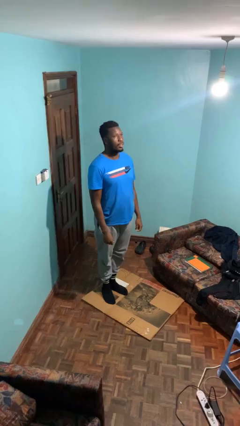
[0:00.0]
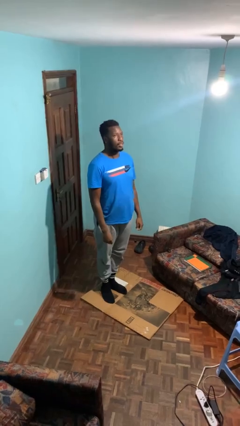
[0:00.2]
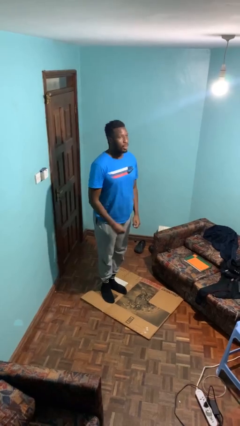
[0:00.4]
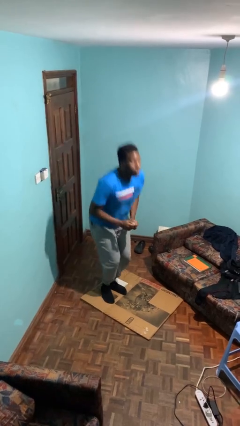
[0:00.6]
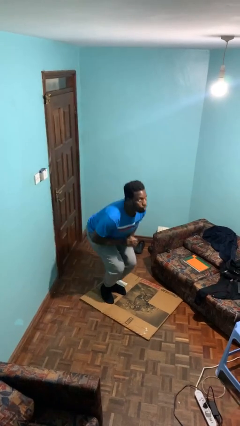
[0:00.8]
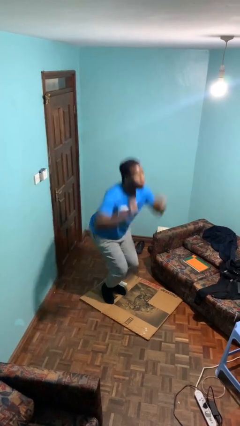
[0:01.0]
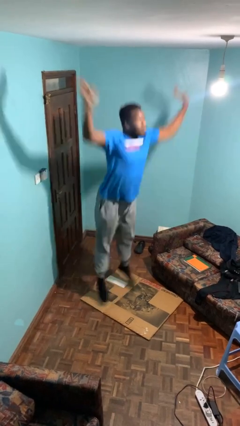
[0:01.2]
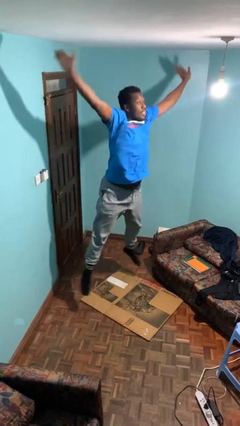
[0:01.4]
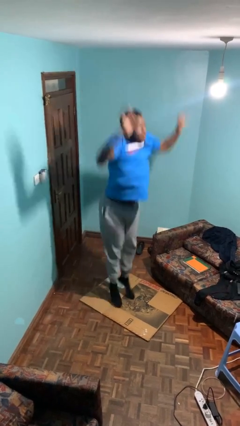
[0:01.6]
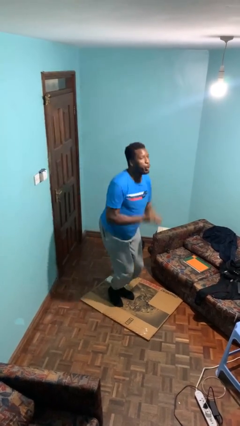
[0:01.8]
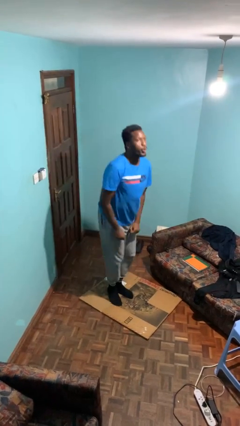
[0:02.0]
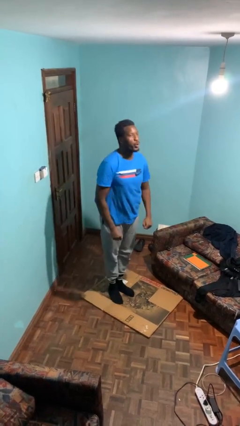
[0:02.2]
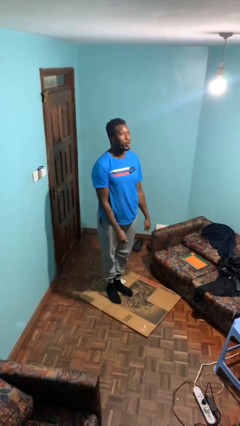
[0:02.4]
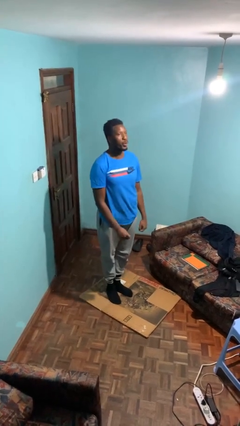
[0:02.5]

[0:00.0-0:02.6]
person exercises with jumping jacks

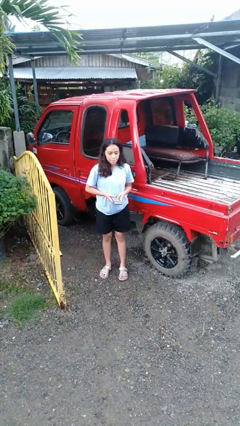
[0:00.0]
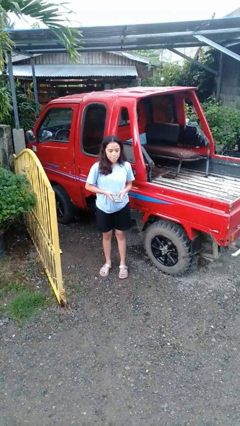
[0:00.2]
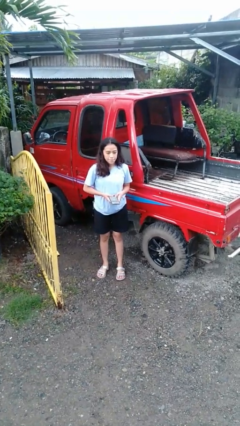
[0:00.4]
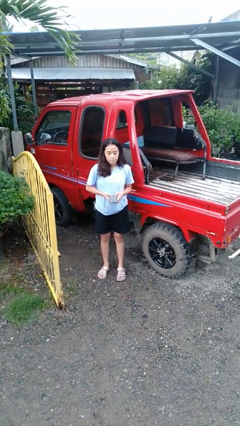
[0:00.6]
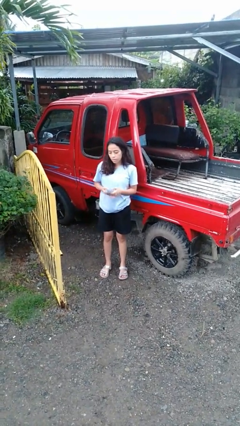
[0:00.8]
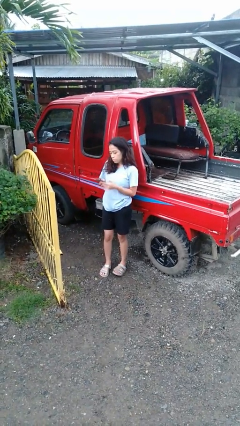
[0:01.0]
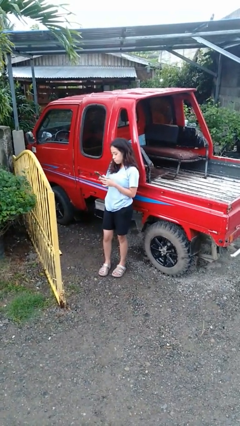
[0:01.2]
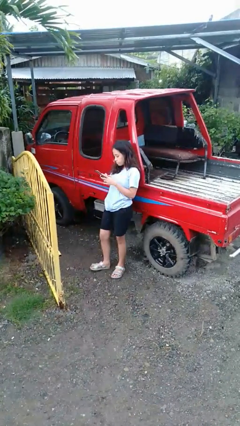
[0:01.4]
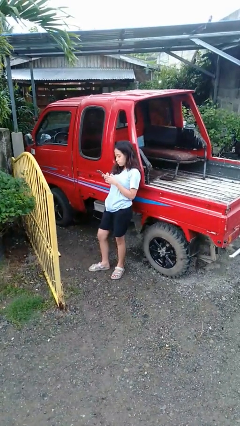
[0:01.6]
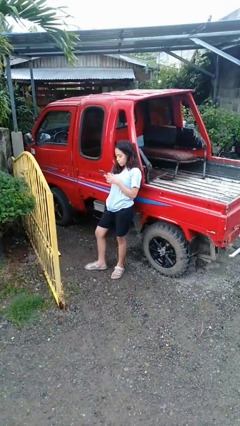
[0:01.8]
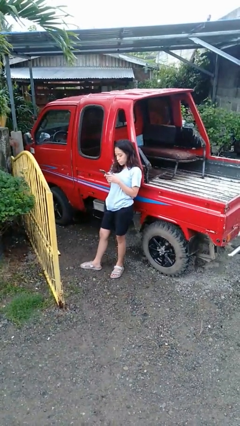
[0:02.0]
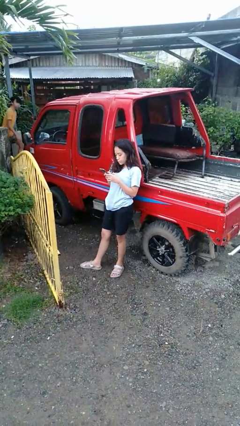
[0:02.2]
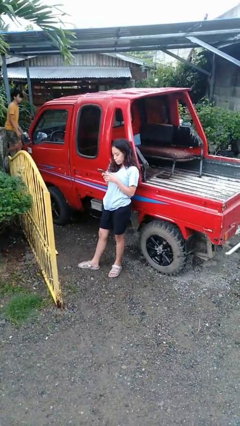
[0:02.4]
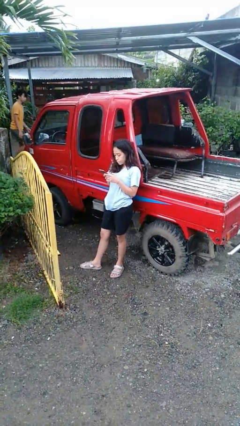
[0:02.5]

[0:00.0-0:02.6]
person leans against car

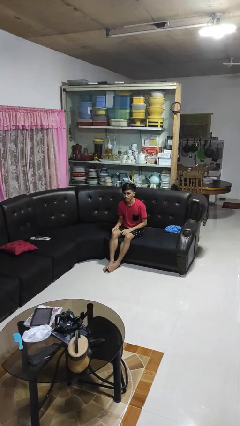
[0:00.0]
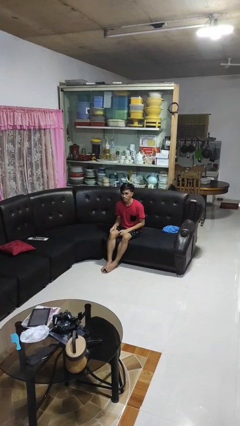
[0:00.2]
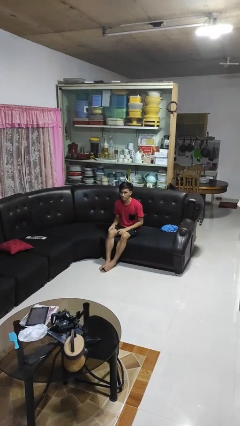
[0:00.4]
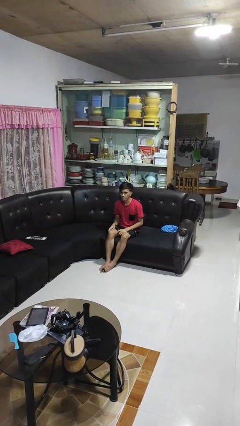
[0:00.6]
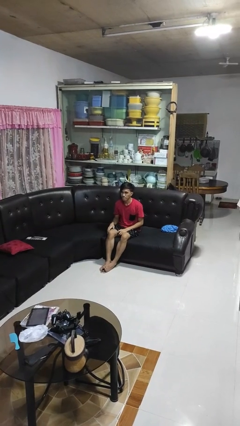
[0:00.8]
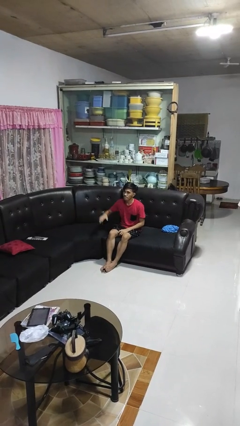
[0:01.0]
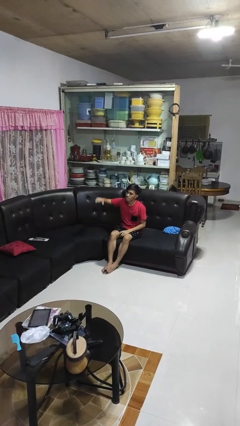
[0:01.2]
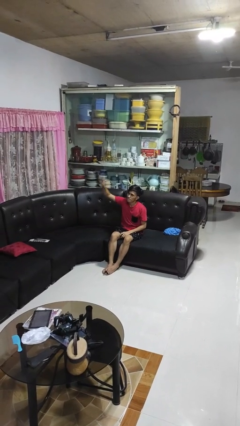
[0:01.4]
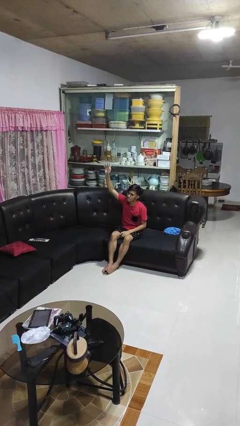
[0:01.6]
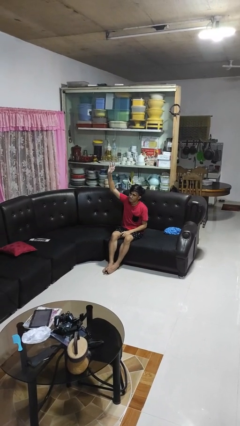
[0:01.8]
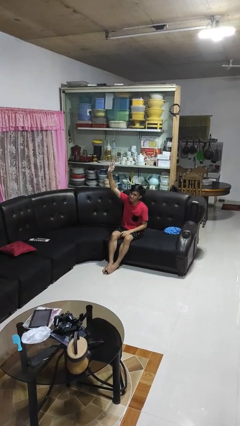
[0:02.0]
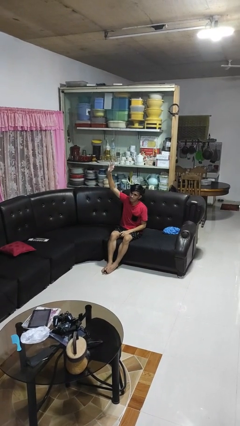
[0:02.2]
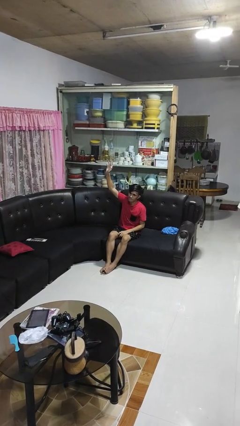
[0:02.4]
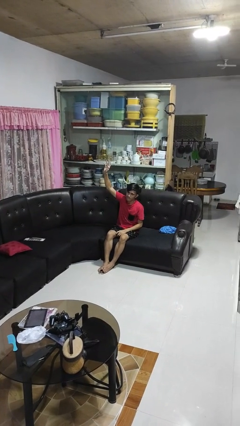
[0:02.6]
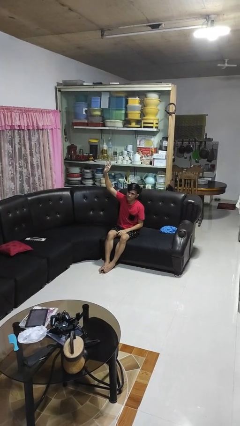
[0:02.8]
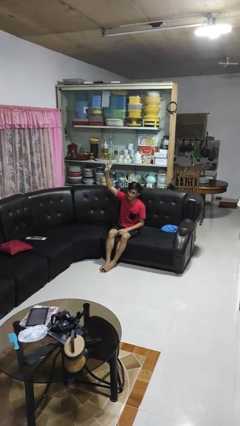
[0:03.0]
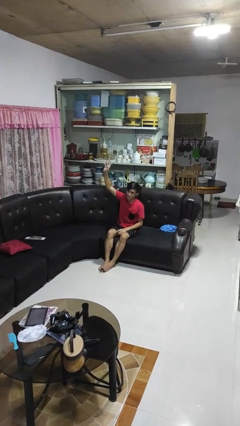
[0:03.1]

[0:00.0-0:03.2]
person gestures raise hand

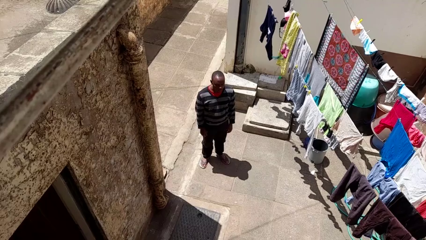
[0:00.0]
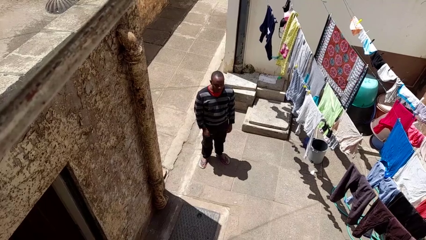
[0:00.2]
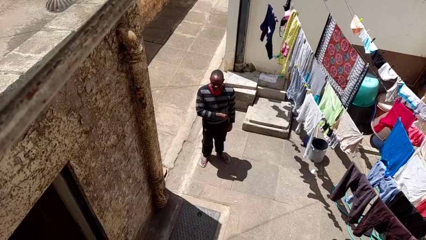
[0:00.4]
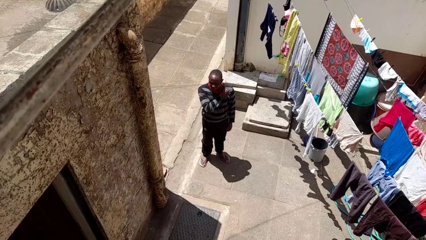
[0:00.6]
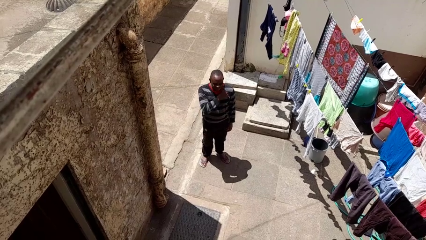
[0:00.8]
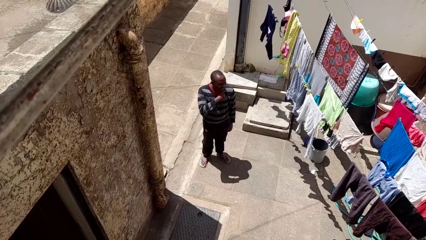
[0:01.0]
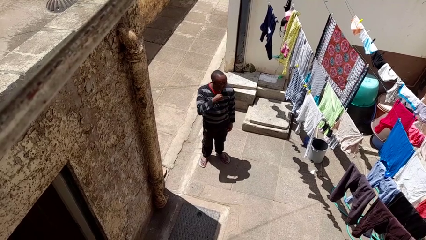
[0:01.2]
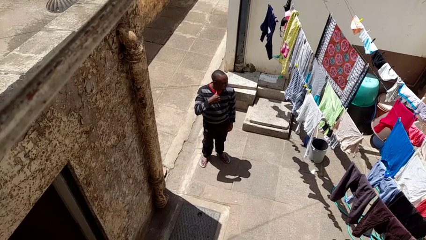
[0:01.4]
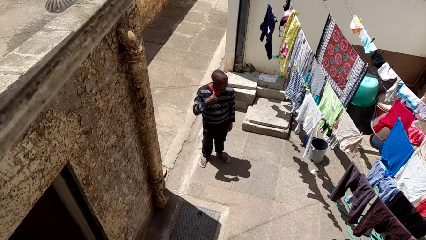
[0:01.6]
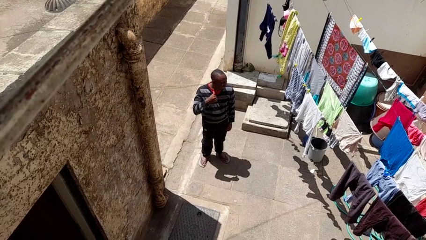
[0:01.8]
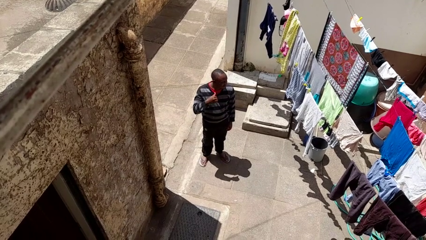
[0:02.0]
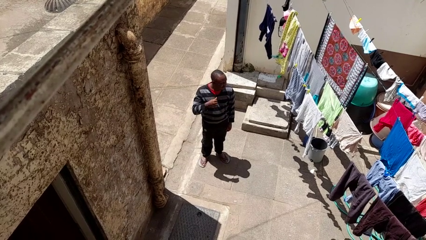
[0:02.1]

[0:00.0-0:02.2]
person gestures cut

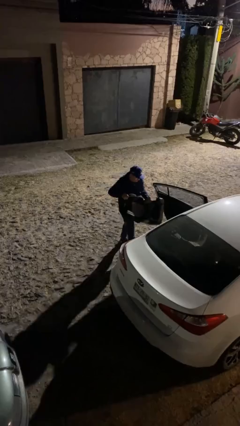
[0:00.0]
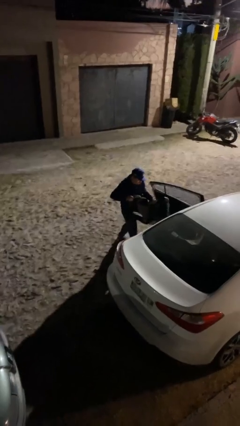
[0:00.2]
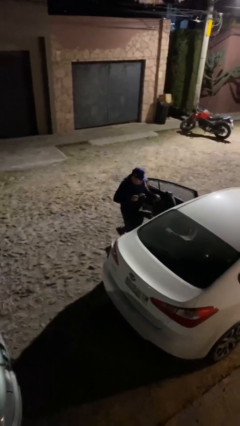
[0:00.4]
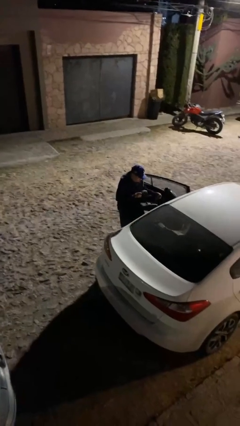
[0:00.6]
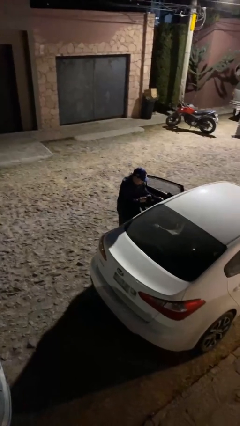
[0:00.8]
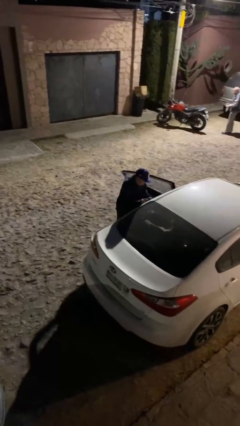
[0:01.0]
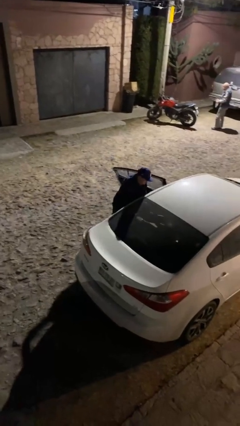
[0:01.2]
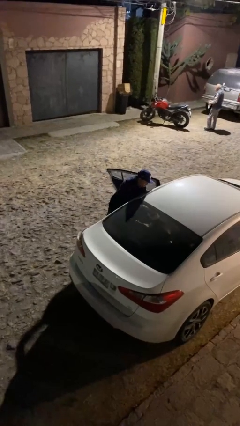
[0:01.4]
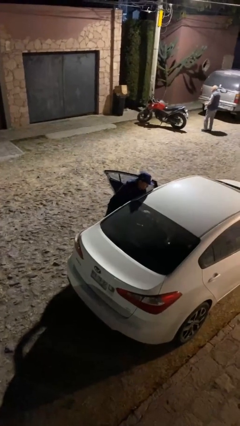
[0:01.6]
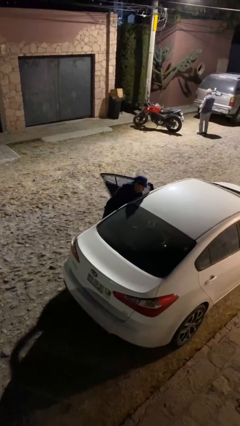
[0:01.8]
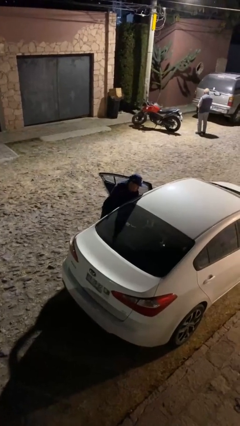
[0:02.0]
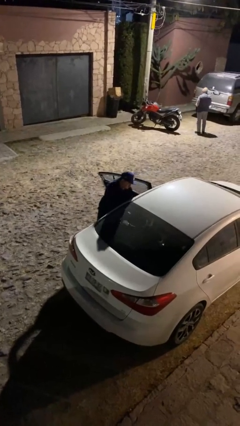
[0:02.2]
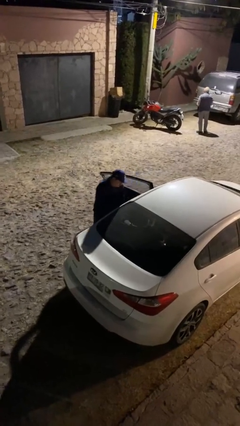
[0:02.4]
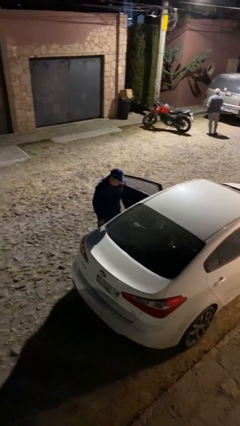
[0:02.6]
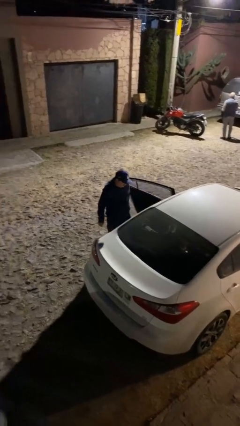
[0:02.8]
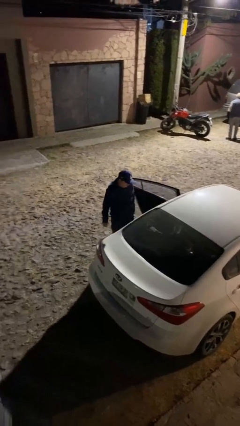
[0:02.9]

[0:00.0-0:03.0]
person loads car

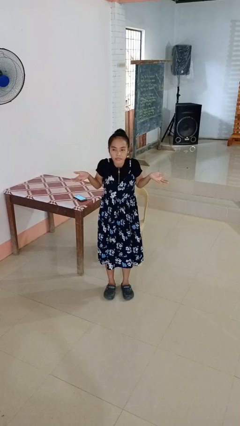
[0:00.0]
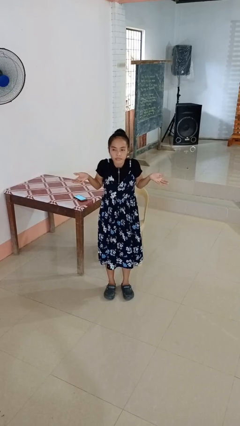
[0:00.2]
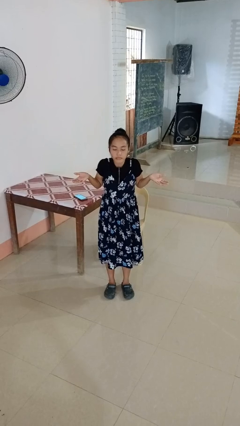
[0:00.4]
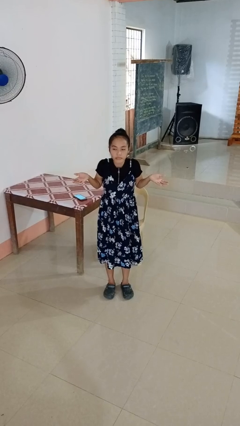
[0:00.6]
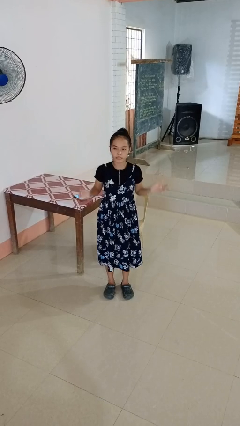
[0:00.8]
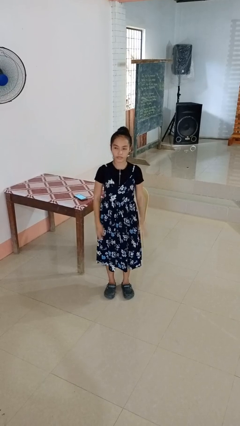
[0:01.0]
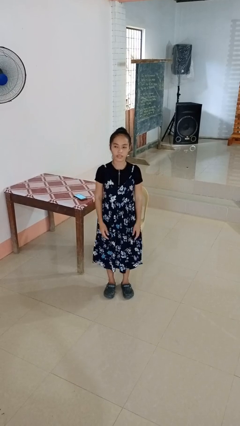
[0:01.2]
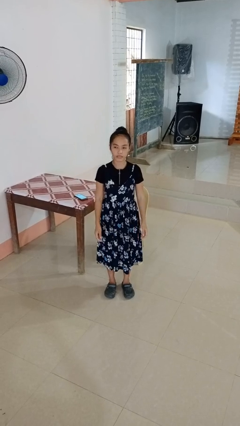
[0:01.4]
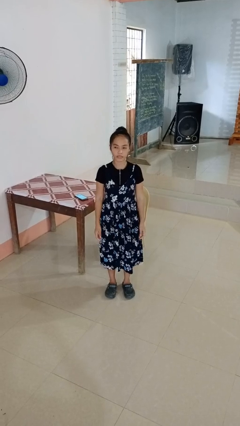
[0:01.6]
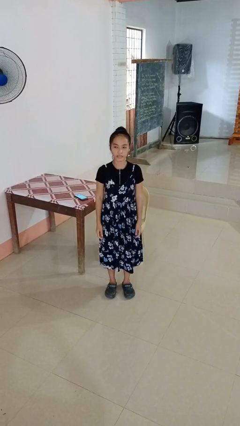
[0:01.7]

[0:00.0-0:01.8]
person shrugs

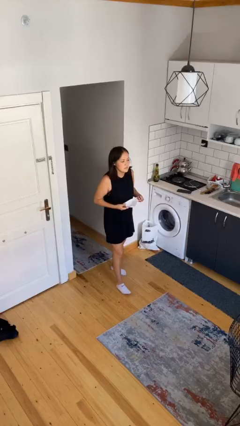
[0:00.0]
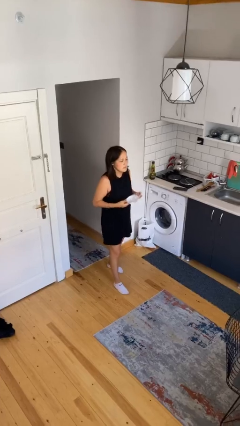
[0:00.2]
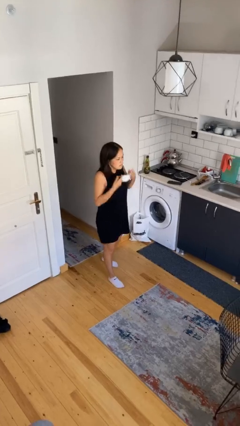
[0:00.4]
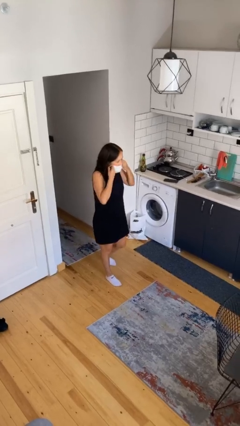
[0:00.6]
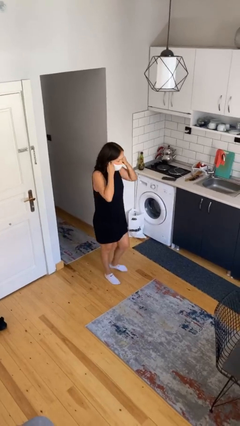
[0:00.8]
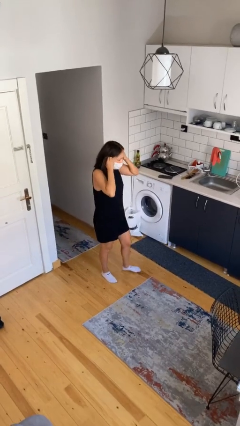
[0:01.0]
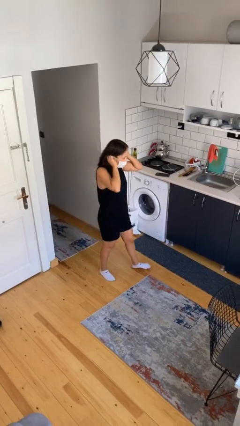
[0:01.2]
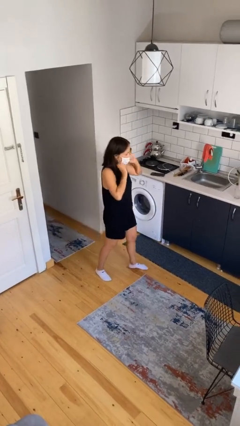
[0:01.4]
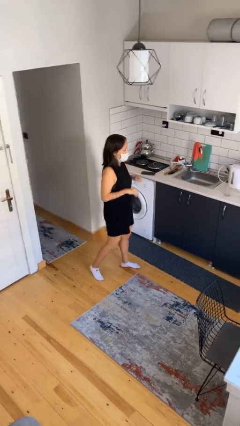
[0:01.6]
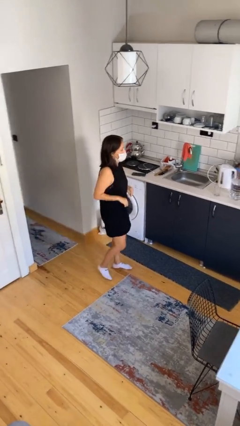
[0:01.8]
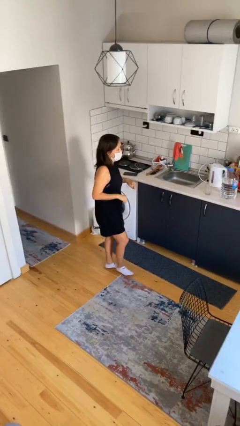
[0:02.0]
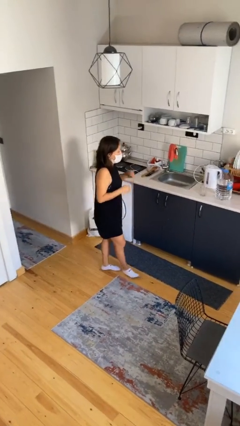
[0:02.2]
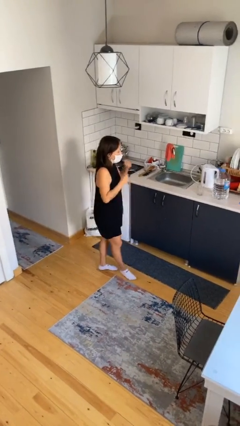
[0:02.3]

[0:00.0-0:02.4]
person puts on facemask
